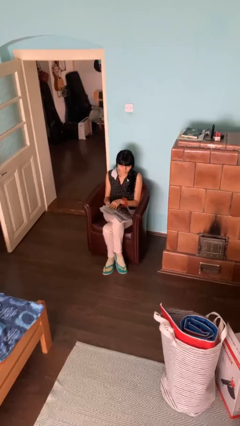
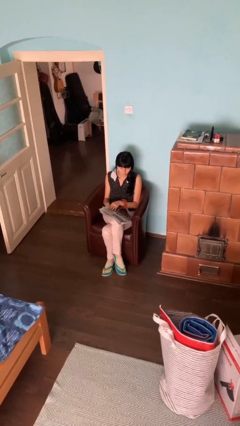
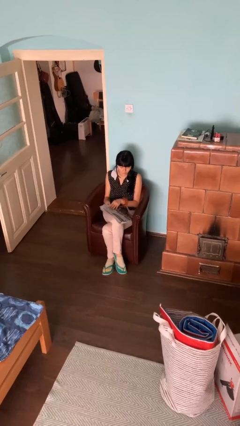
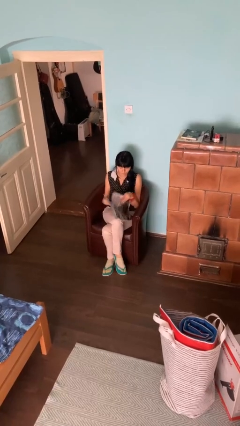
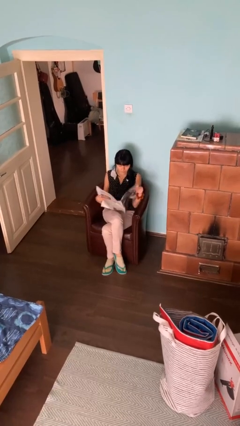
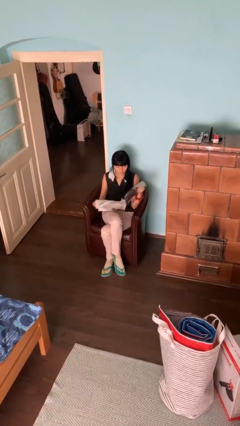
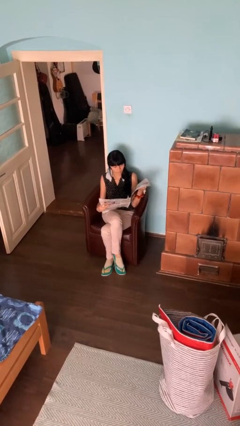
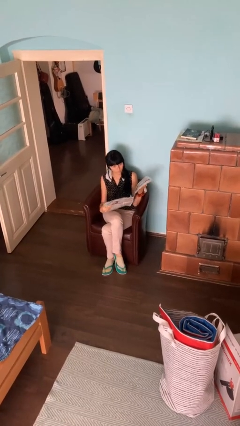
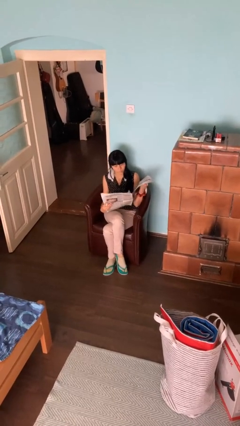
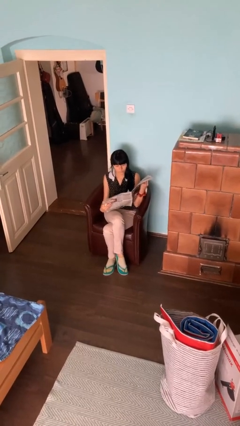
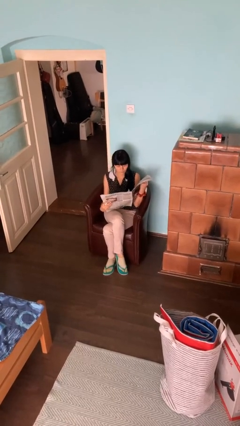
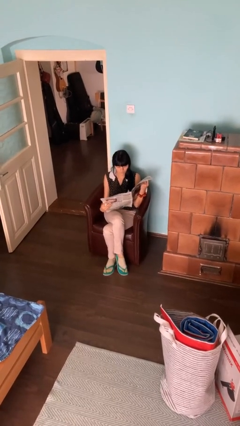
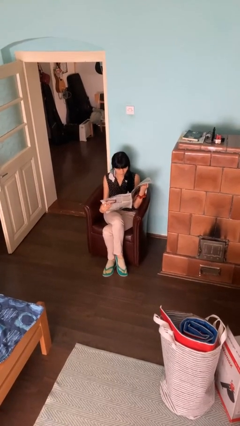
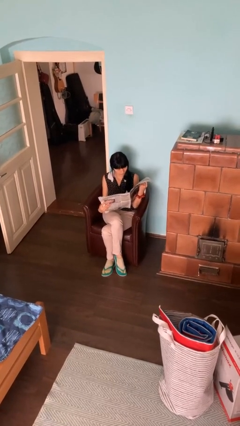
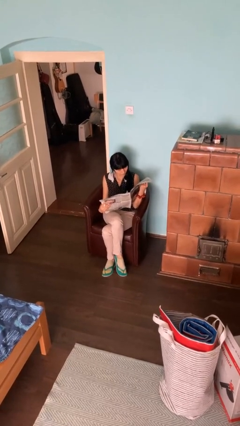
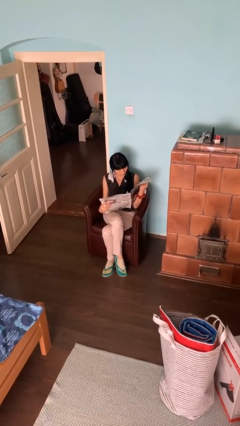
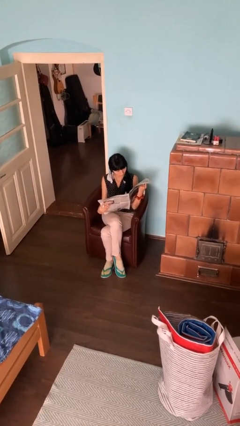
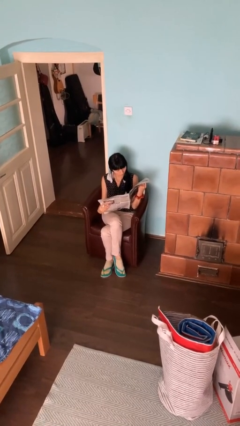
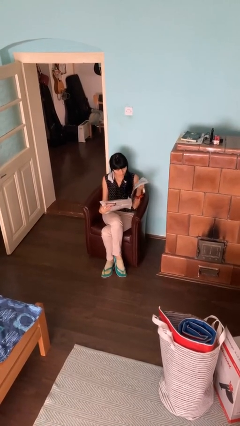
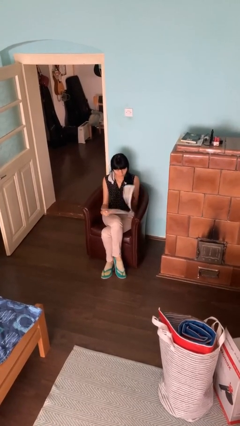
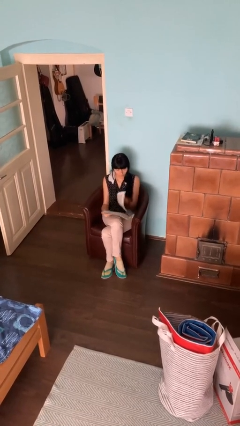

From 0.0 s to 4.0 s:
person reads newspaper

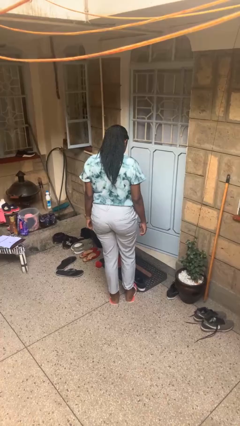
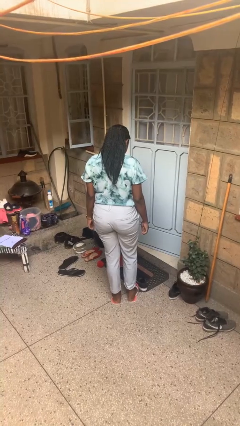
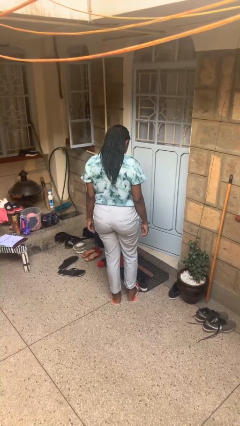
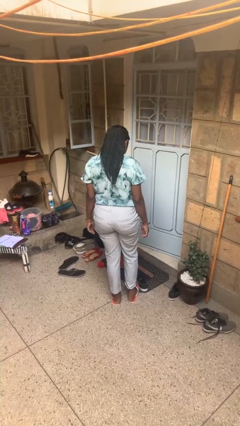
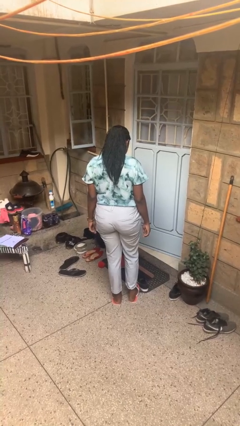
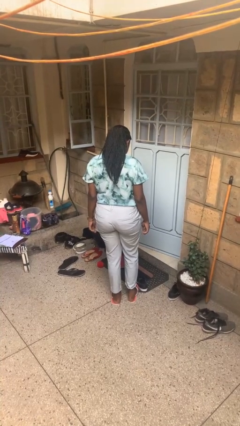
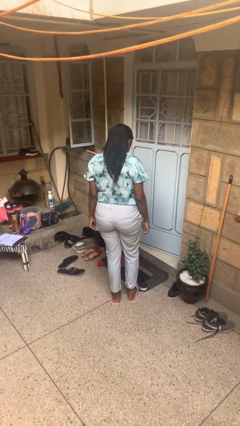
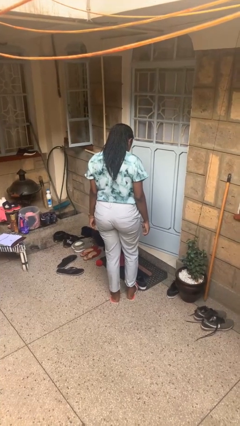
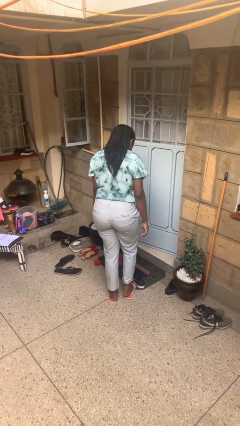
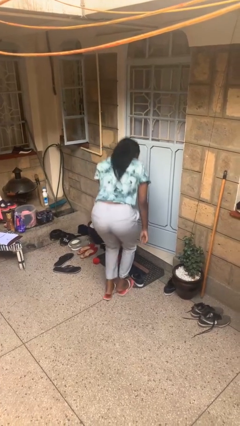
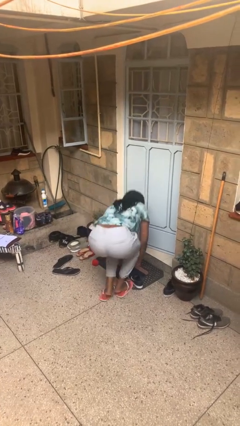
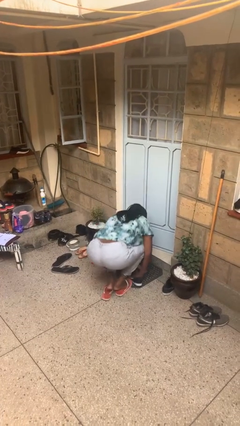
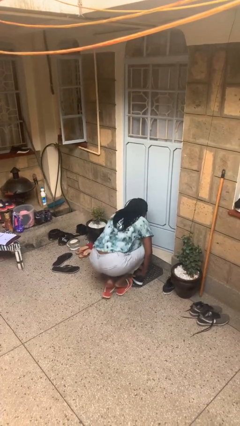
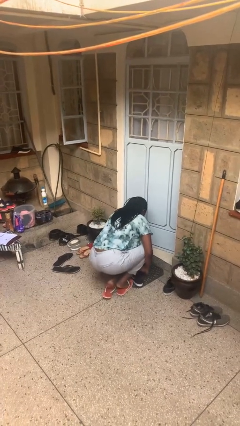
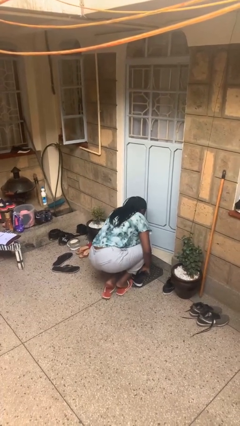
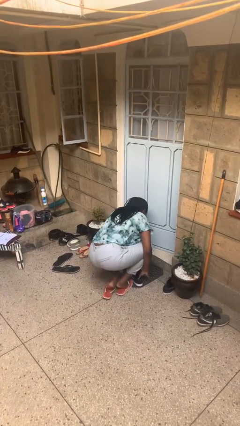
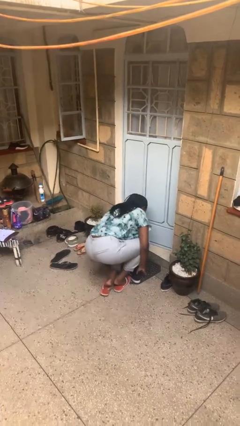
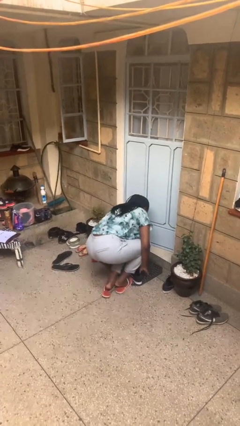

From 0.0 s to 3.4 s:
person trips on object on floor

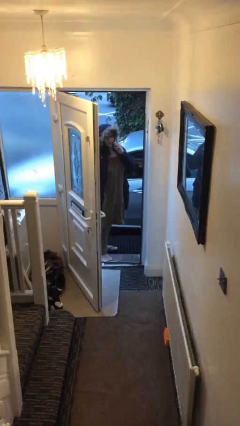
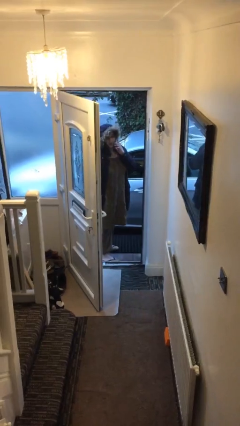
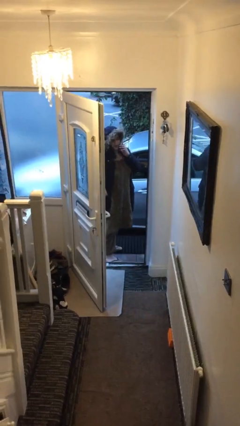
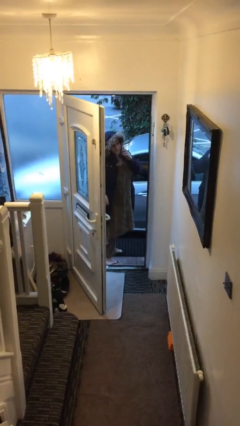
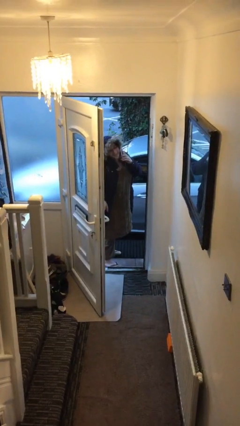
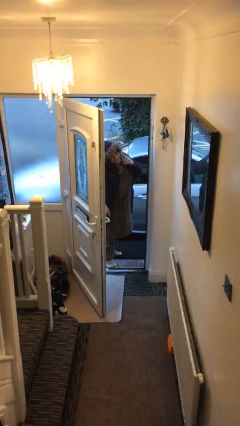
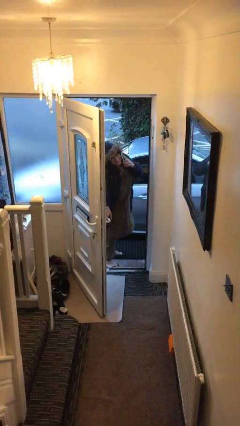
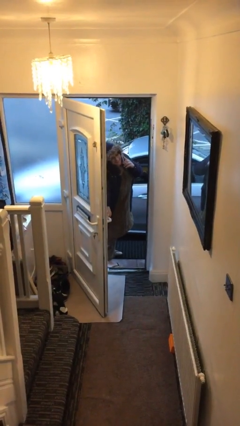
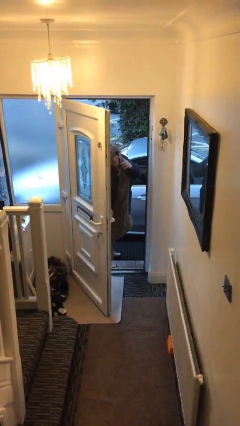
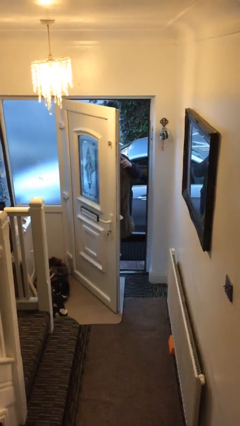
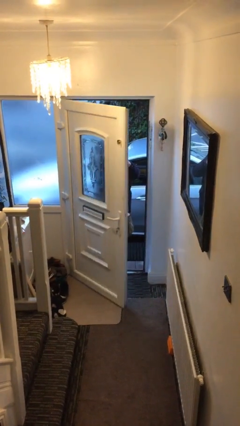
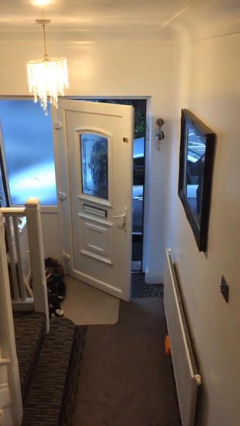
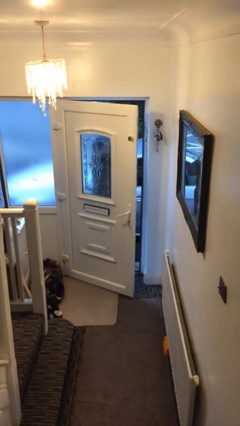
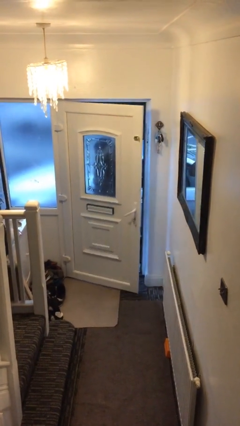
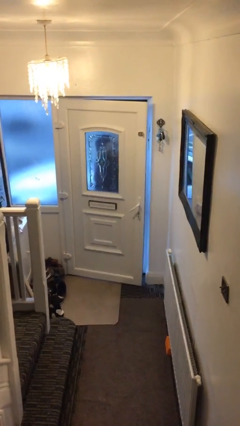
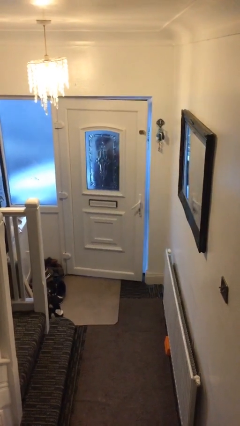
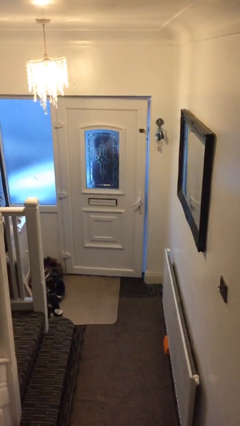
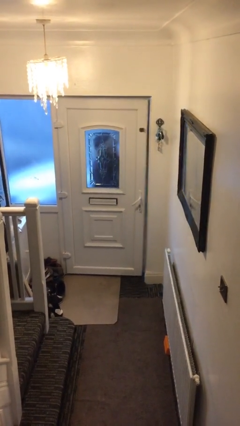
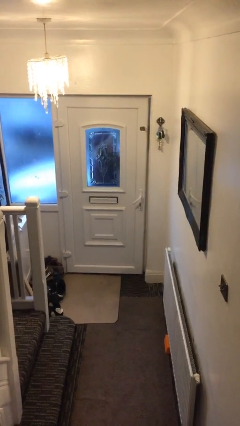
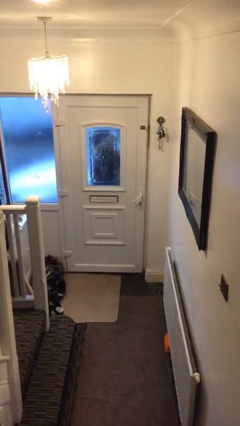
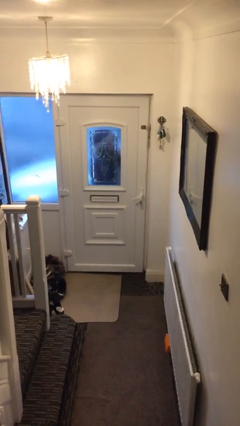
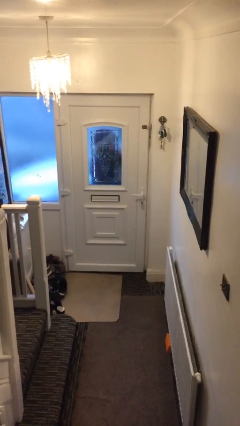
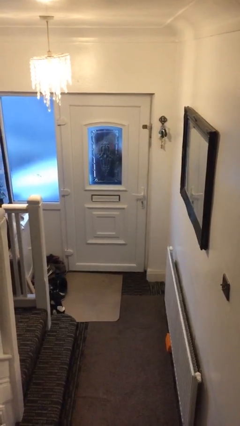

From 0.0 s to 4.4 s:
person closes facility door

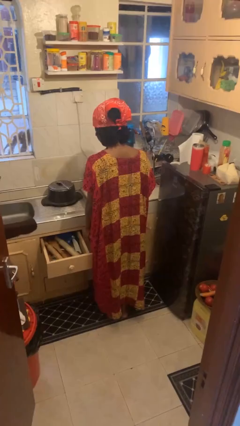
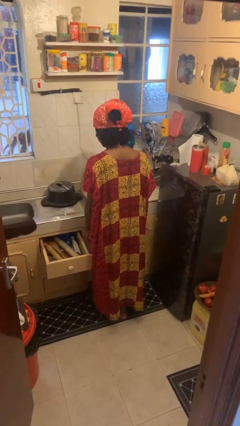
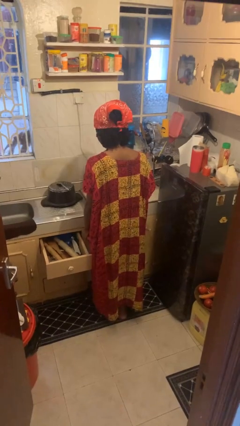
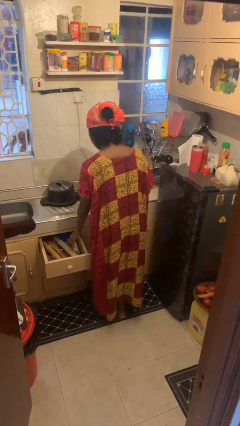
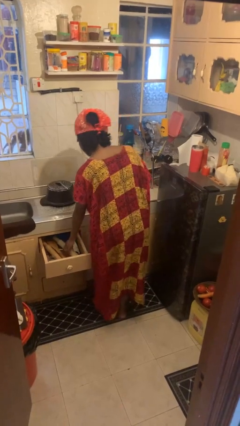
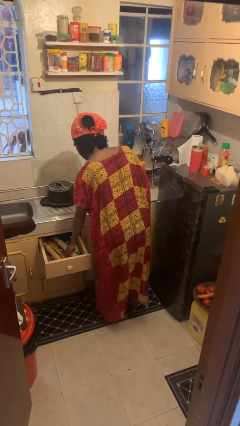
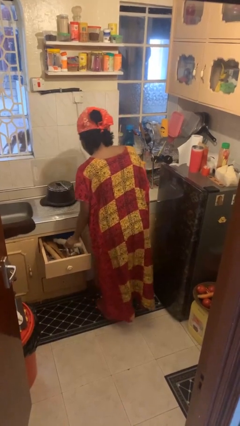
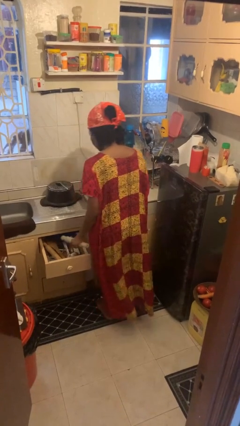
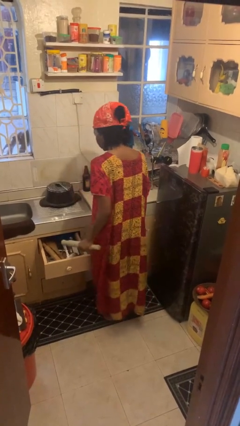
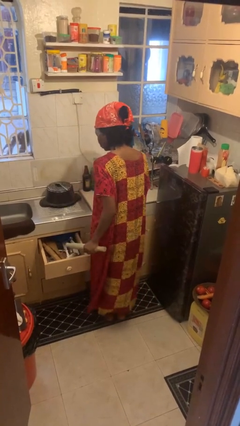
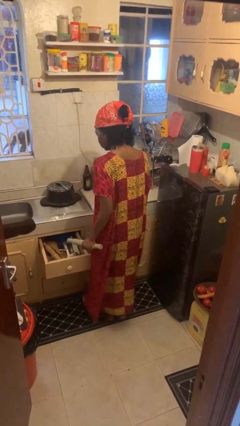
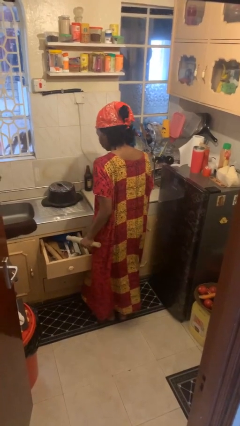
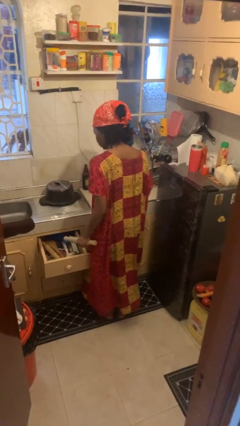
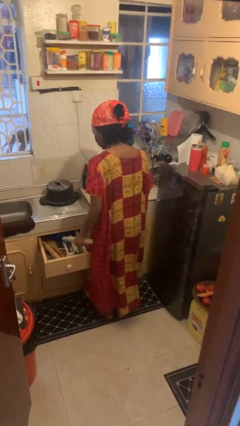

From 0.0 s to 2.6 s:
person takes object from kitchen drawer

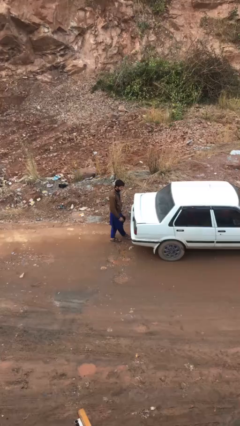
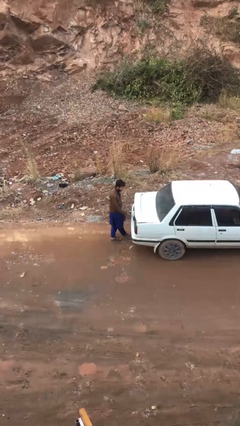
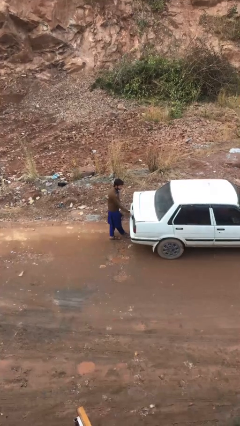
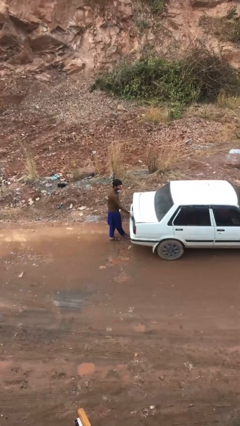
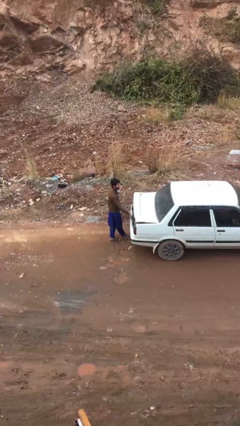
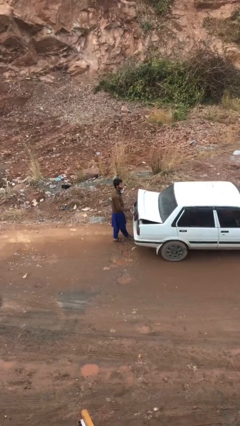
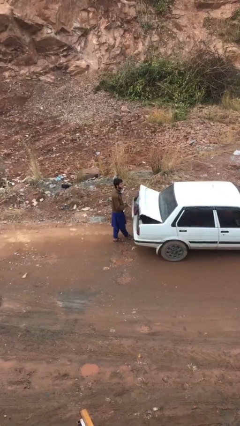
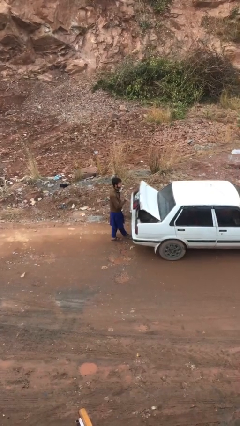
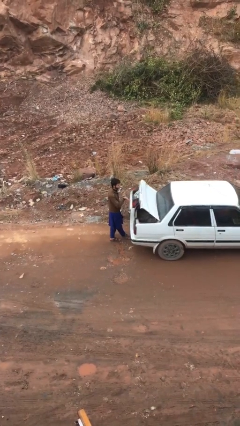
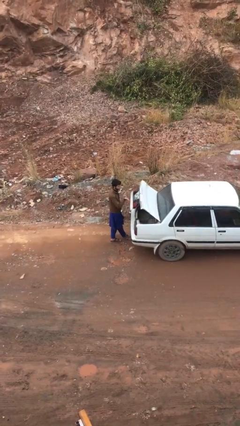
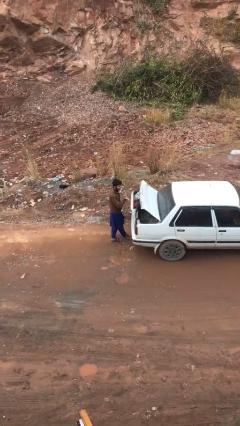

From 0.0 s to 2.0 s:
person opens car trunk

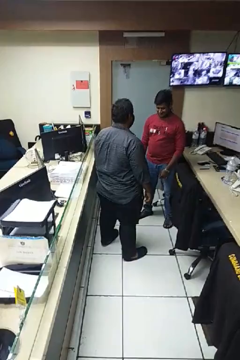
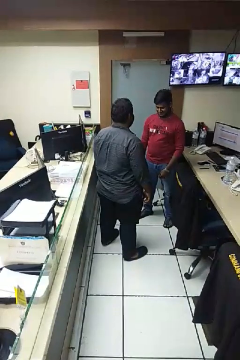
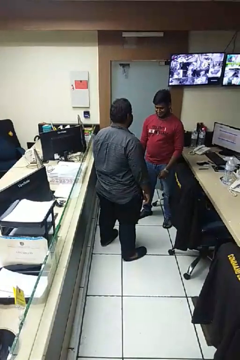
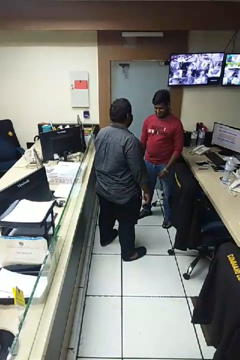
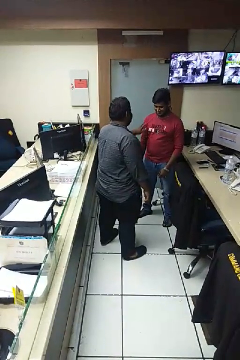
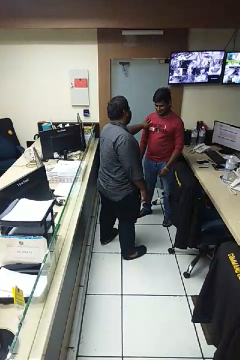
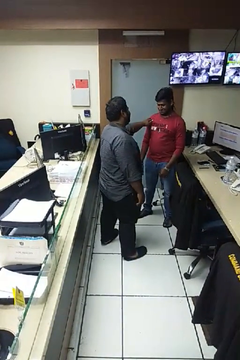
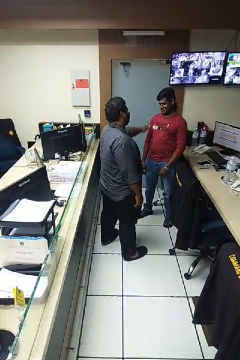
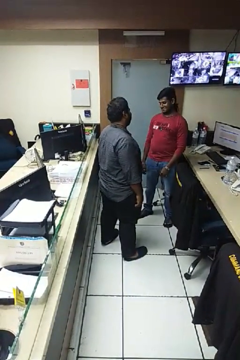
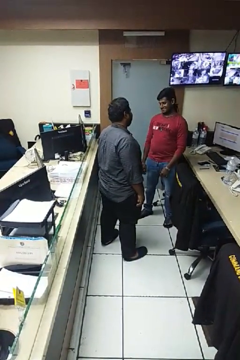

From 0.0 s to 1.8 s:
person shoves person
